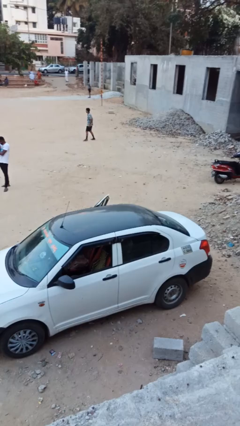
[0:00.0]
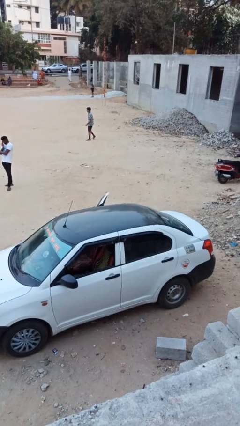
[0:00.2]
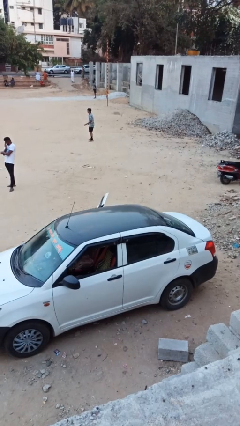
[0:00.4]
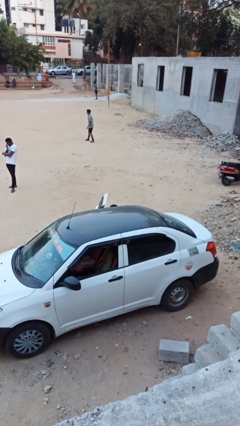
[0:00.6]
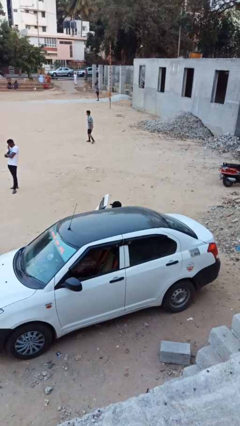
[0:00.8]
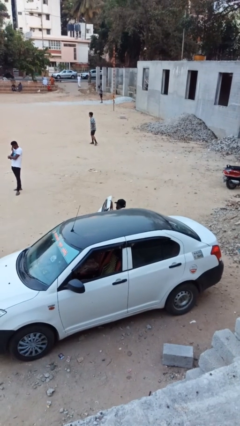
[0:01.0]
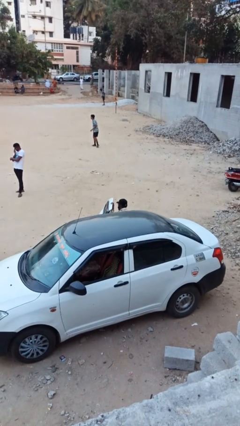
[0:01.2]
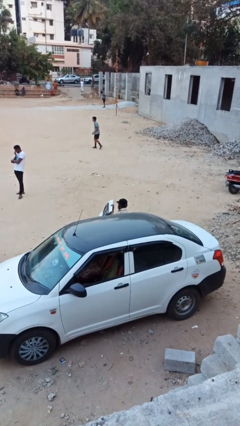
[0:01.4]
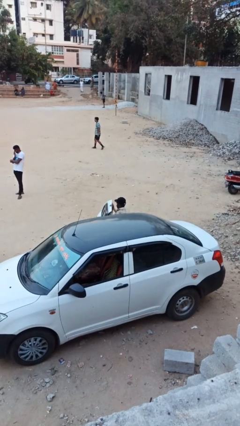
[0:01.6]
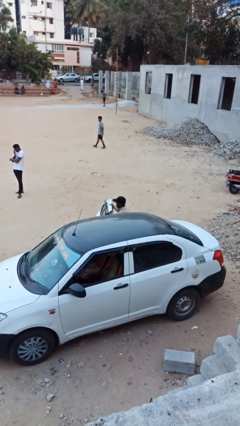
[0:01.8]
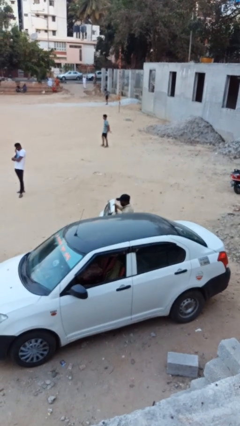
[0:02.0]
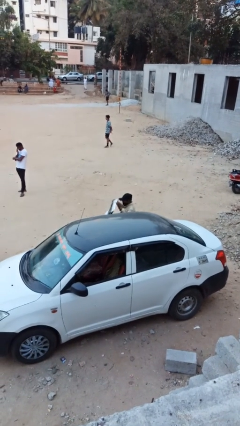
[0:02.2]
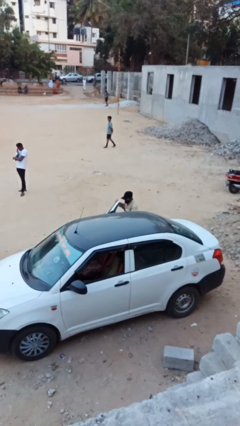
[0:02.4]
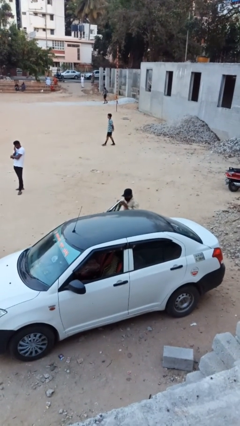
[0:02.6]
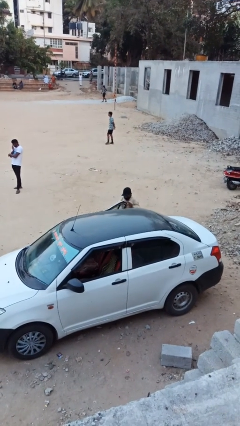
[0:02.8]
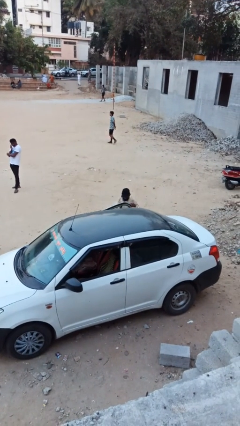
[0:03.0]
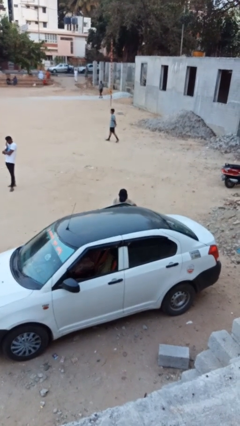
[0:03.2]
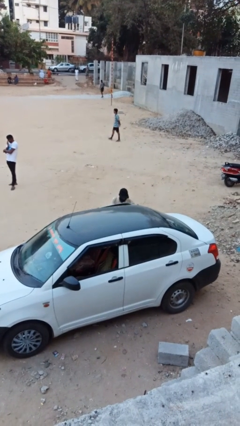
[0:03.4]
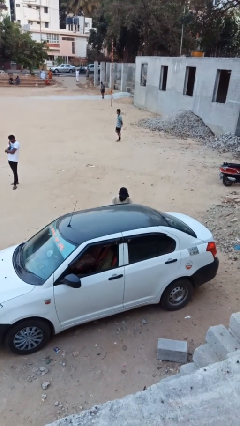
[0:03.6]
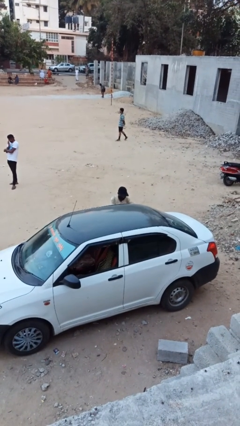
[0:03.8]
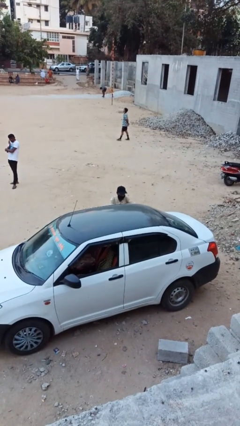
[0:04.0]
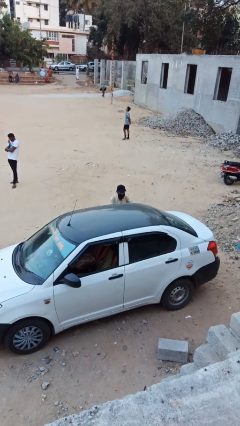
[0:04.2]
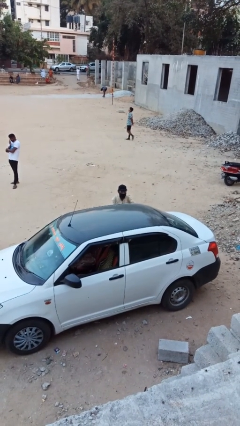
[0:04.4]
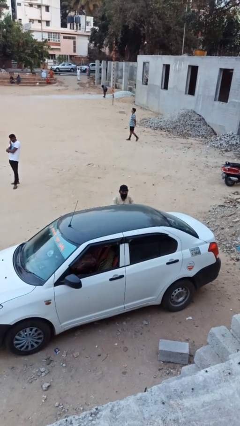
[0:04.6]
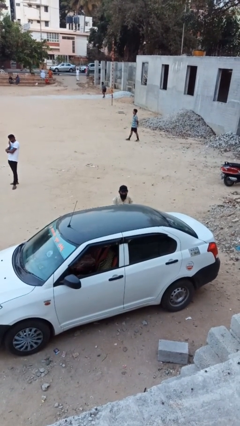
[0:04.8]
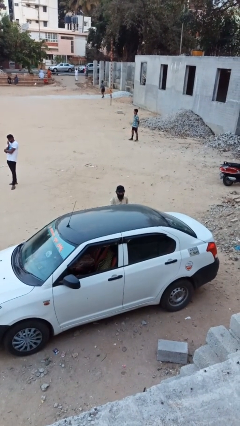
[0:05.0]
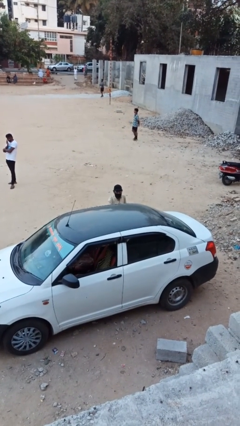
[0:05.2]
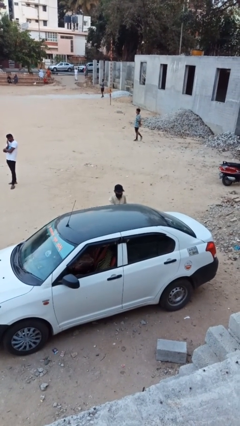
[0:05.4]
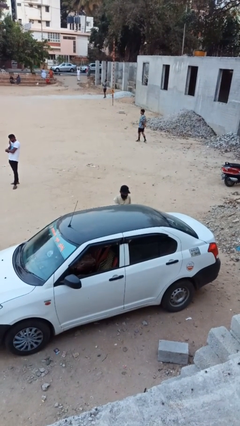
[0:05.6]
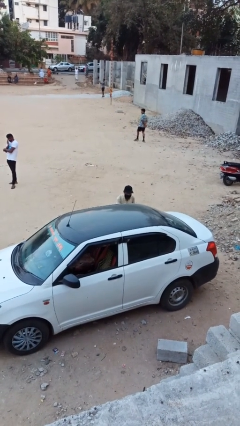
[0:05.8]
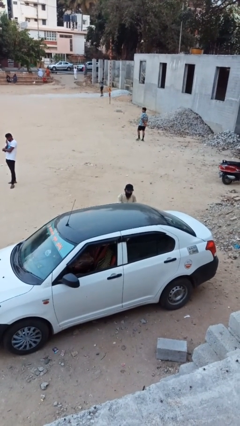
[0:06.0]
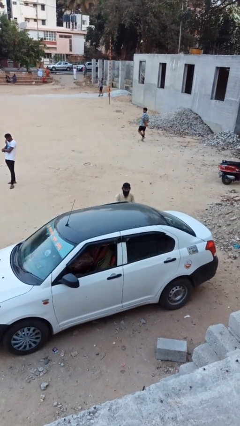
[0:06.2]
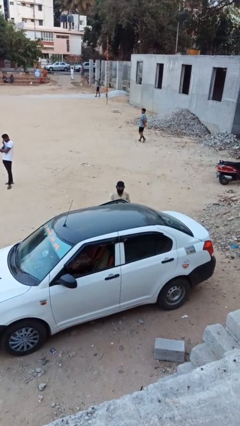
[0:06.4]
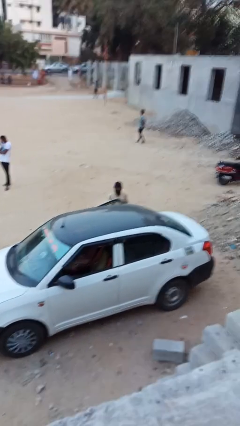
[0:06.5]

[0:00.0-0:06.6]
person exits car

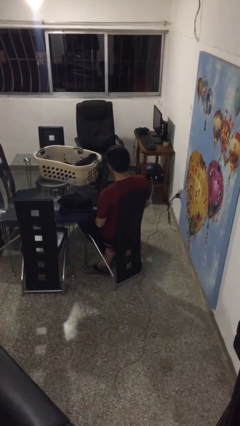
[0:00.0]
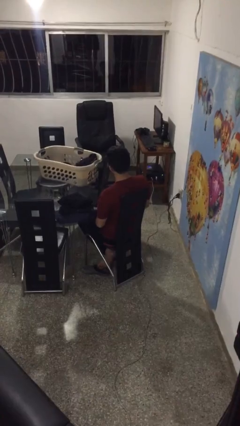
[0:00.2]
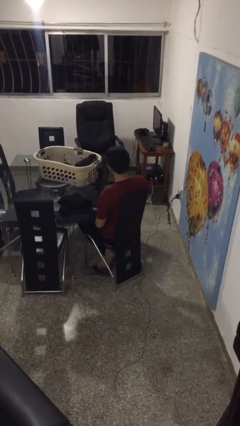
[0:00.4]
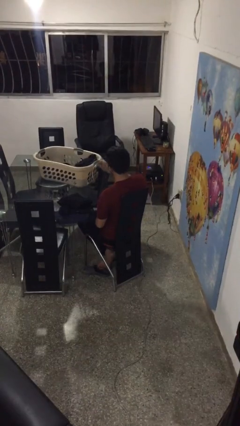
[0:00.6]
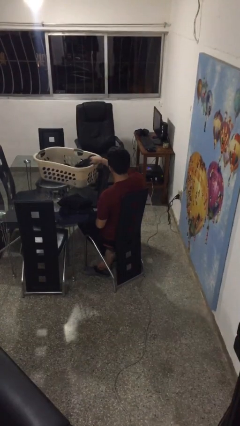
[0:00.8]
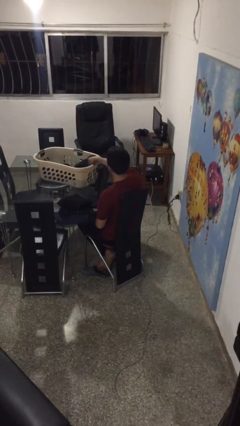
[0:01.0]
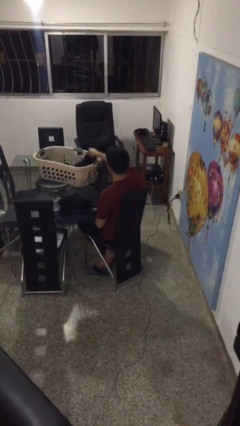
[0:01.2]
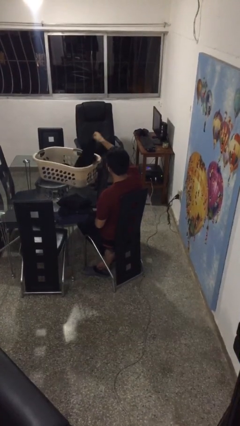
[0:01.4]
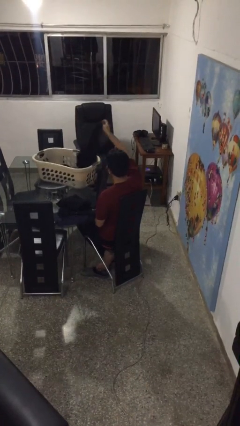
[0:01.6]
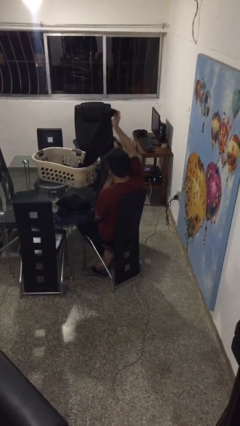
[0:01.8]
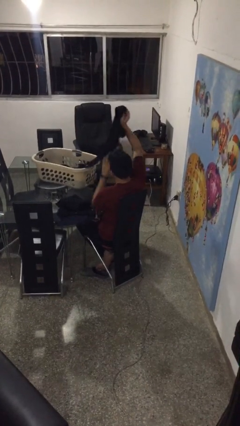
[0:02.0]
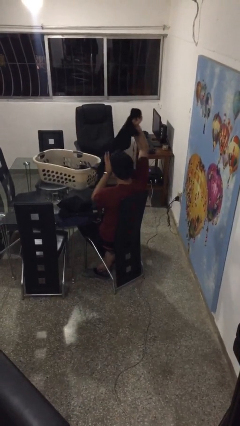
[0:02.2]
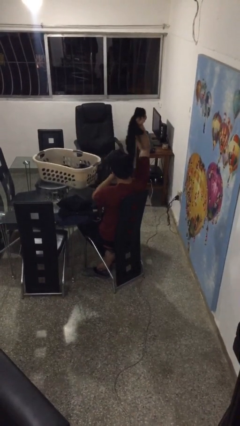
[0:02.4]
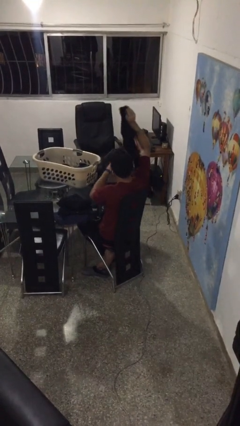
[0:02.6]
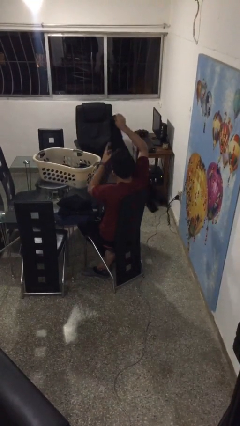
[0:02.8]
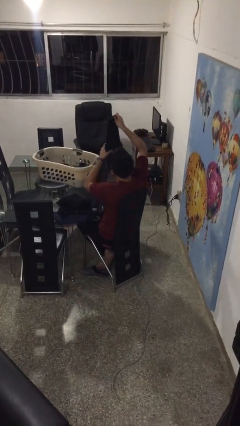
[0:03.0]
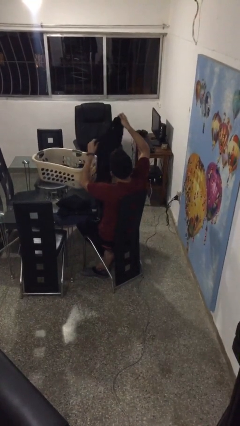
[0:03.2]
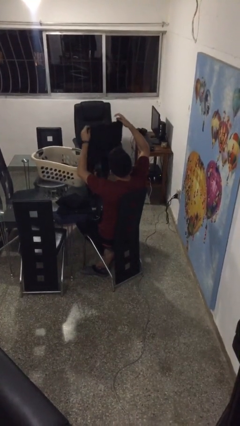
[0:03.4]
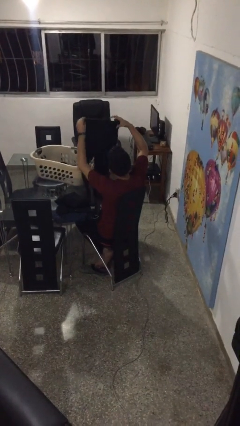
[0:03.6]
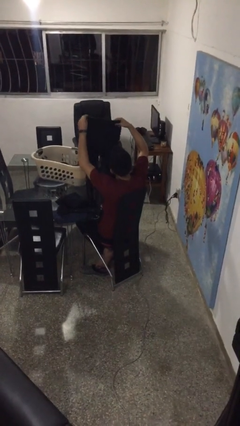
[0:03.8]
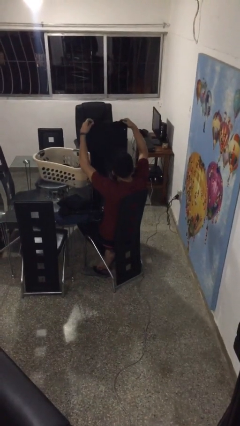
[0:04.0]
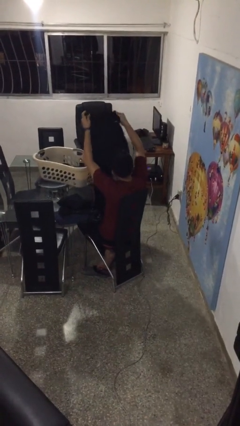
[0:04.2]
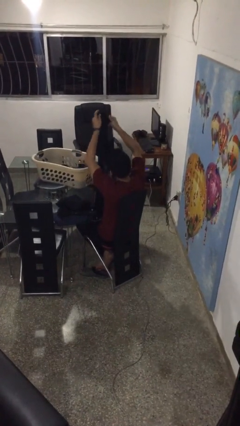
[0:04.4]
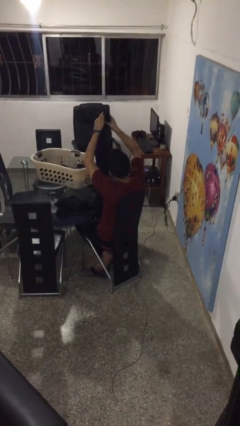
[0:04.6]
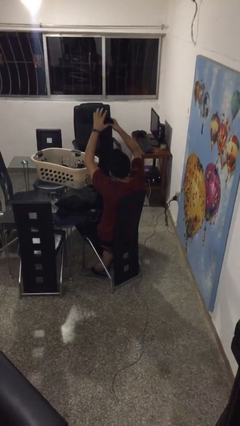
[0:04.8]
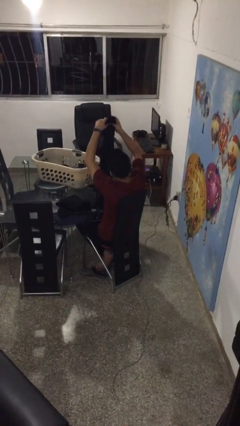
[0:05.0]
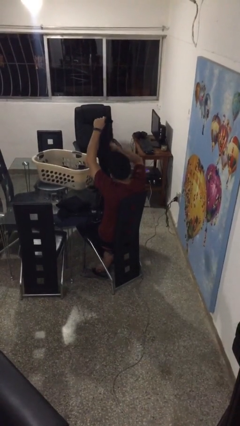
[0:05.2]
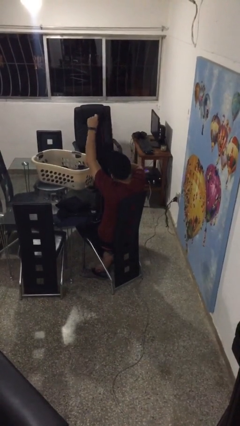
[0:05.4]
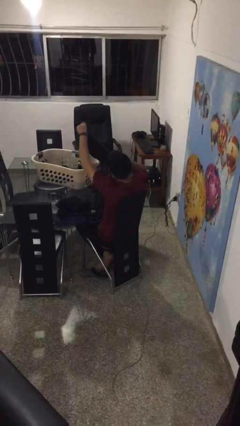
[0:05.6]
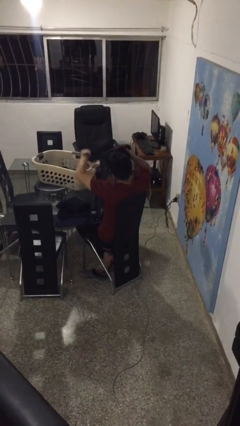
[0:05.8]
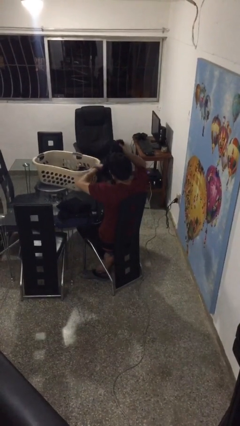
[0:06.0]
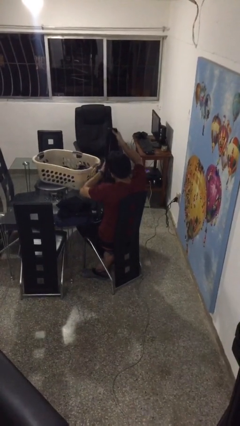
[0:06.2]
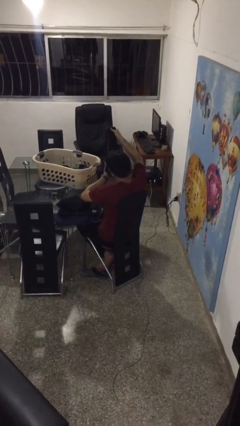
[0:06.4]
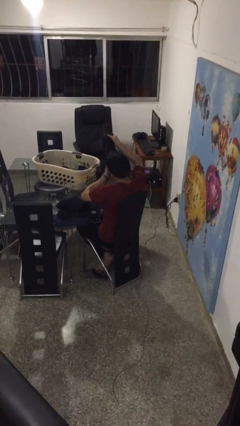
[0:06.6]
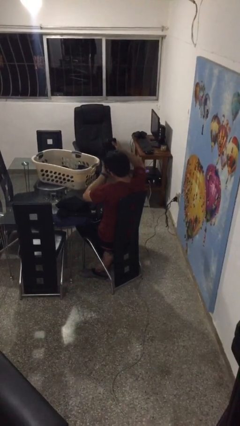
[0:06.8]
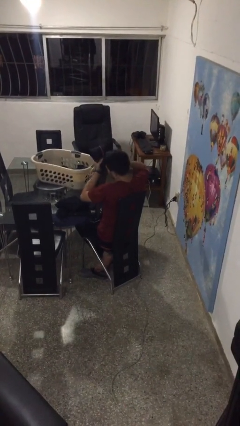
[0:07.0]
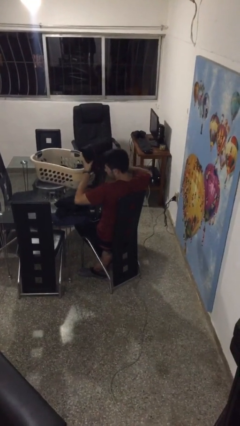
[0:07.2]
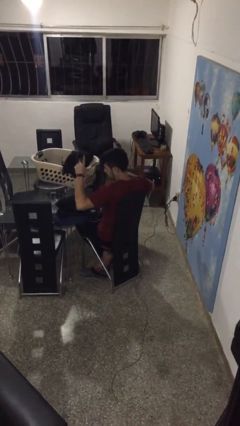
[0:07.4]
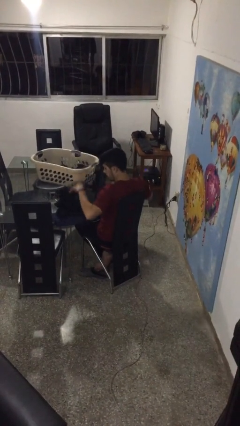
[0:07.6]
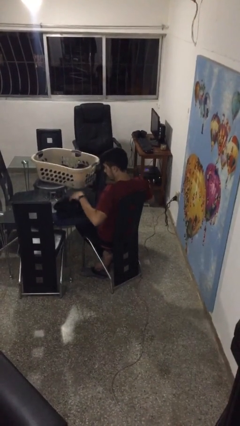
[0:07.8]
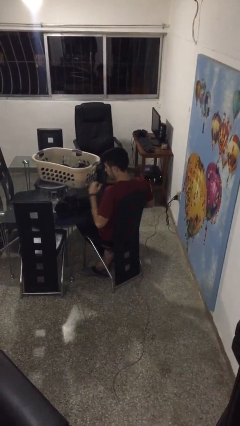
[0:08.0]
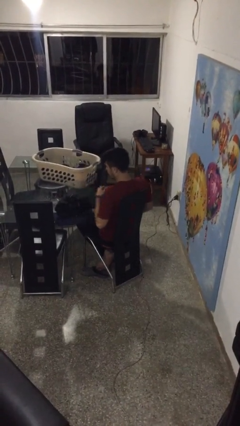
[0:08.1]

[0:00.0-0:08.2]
person folds pants

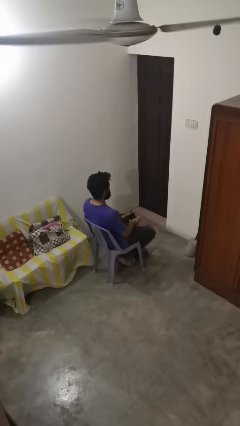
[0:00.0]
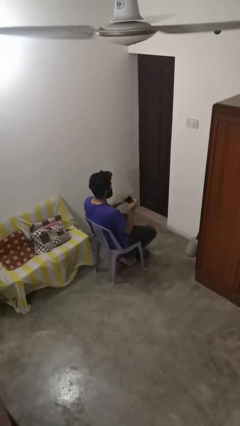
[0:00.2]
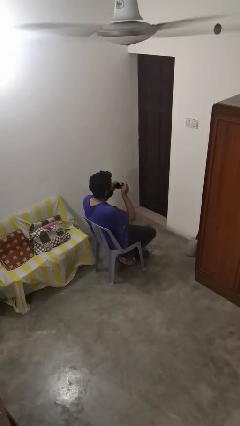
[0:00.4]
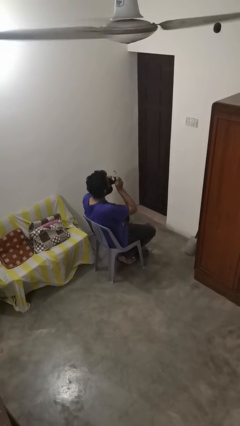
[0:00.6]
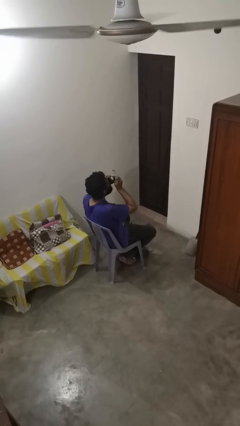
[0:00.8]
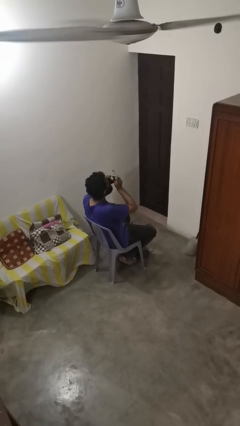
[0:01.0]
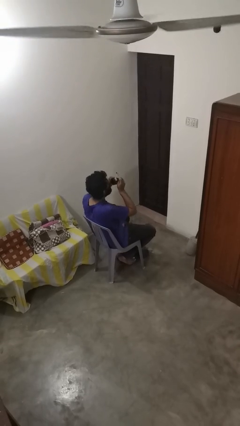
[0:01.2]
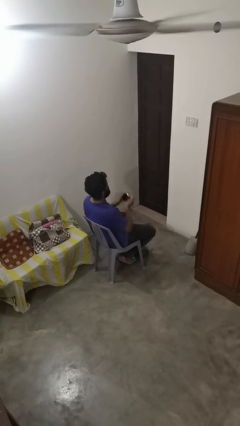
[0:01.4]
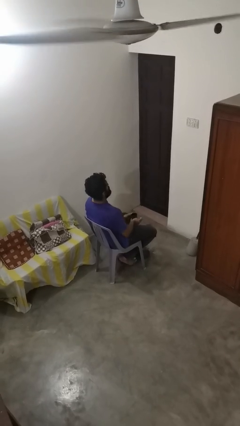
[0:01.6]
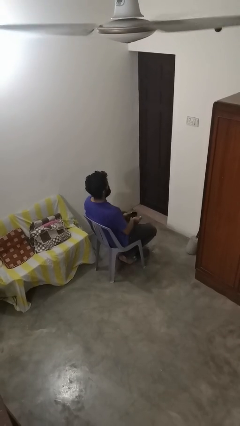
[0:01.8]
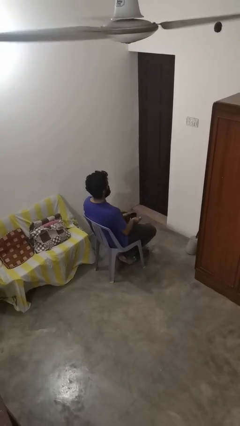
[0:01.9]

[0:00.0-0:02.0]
person drinks from mug

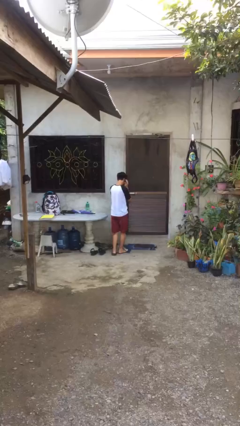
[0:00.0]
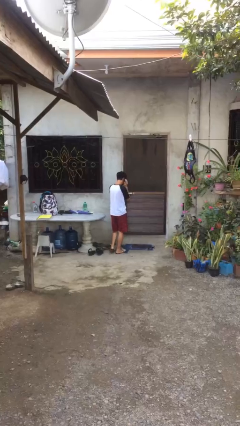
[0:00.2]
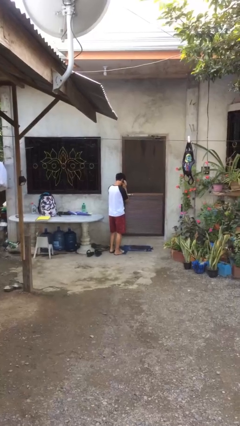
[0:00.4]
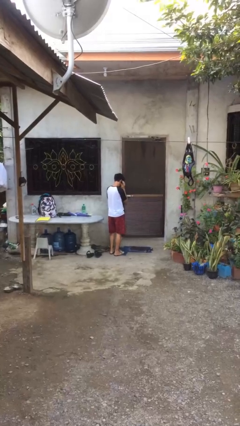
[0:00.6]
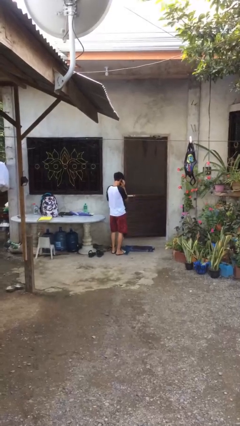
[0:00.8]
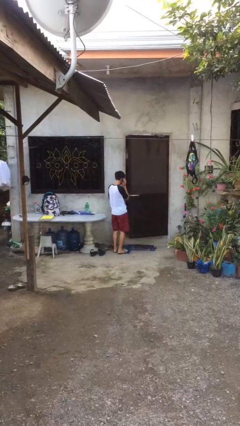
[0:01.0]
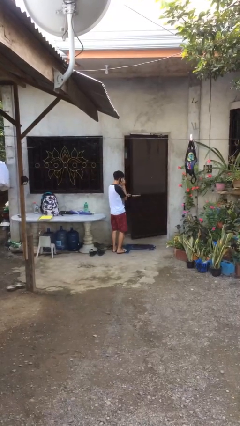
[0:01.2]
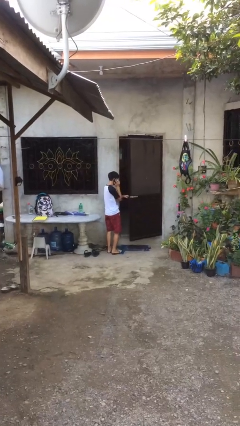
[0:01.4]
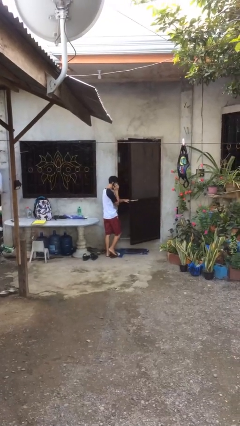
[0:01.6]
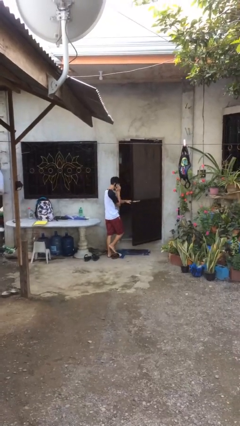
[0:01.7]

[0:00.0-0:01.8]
person opens facility door
